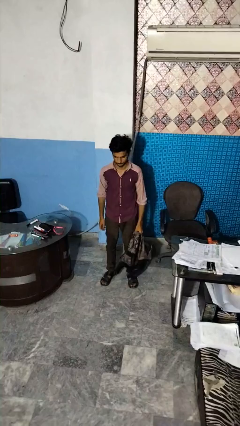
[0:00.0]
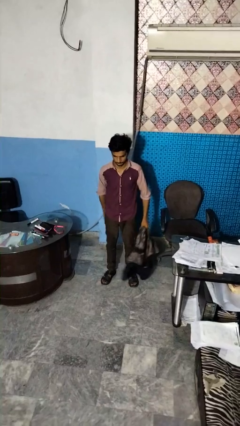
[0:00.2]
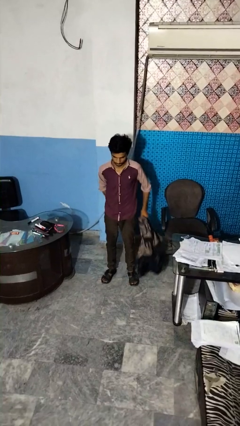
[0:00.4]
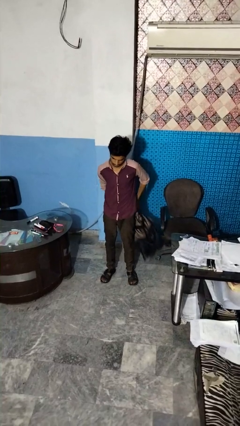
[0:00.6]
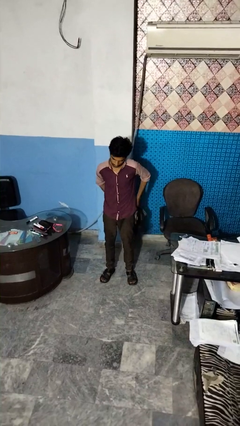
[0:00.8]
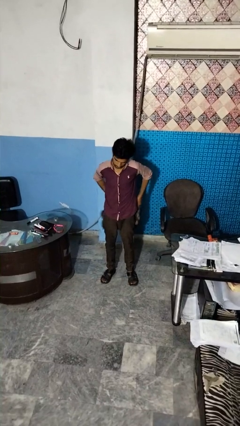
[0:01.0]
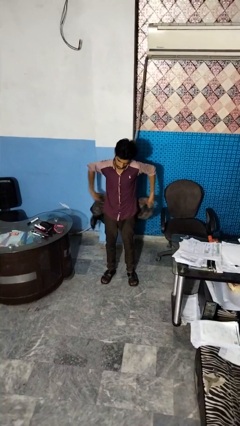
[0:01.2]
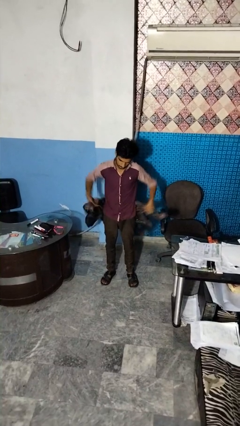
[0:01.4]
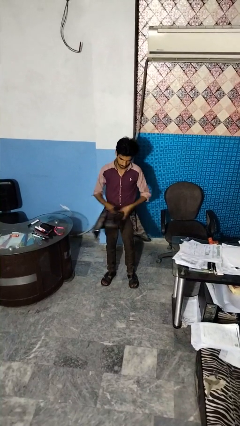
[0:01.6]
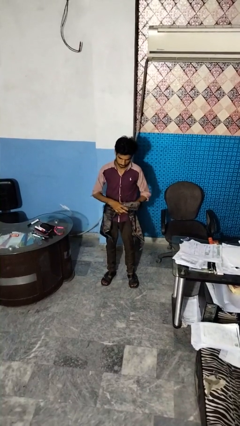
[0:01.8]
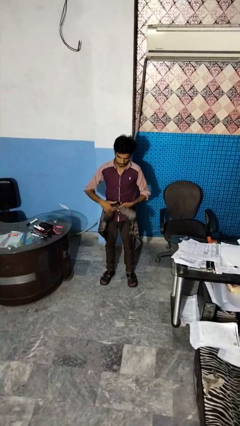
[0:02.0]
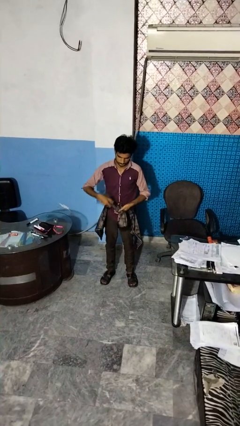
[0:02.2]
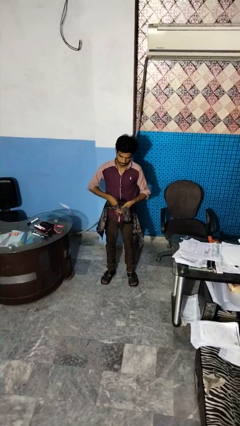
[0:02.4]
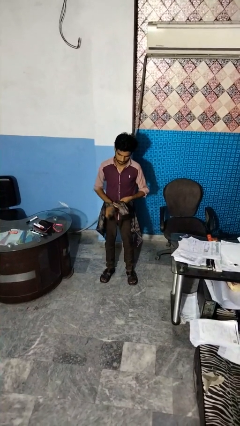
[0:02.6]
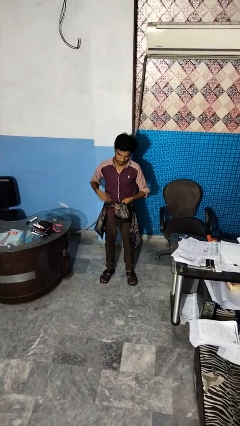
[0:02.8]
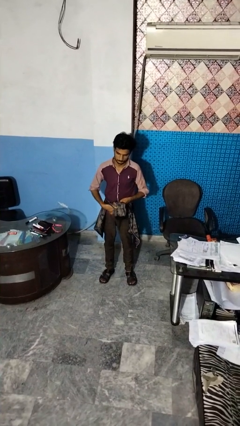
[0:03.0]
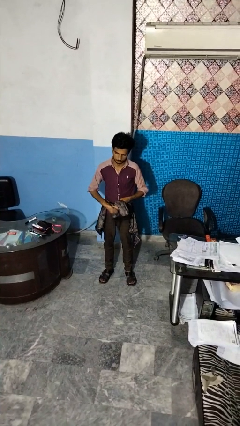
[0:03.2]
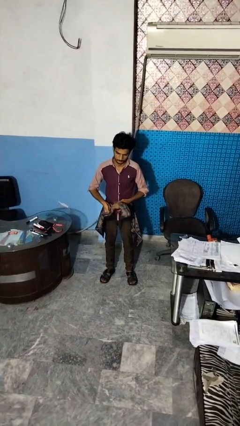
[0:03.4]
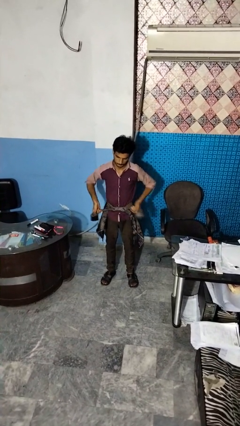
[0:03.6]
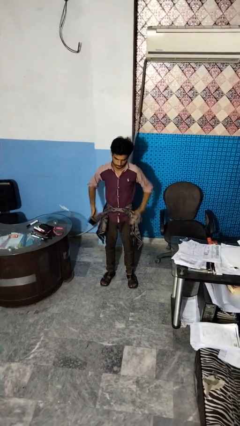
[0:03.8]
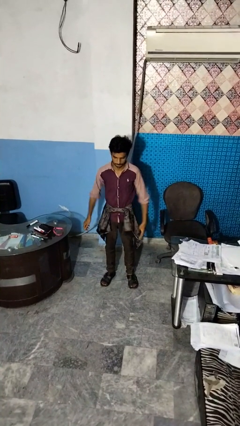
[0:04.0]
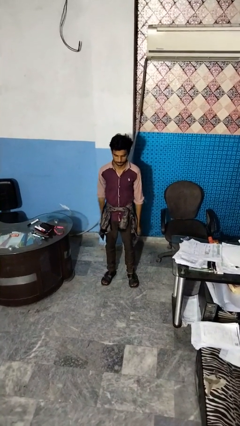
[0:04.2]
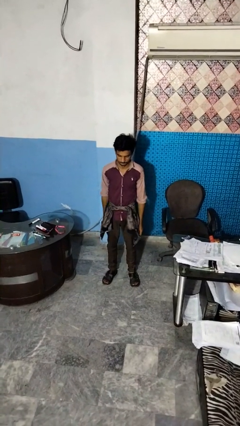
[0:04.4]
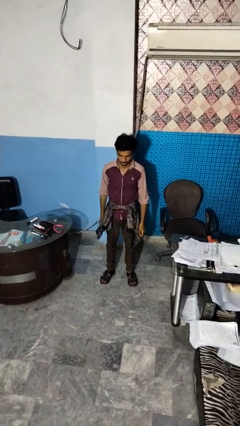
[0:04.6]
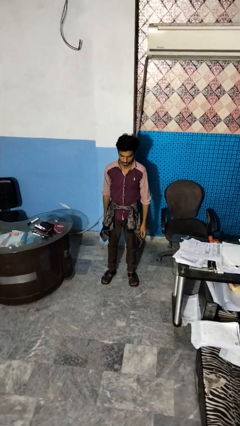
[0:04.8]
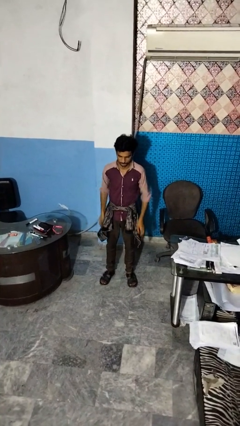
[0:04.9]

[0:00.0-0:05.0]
person ties jacket around waist

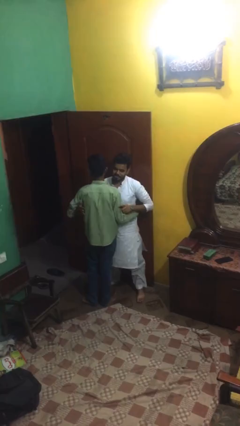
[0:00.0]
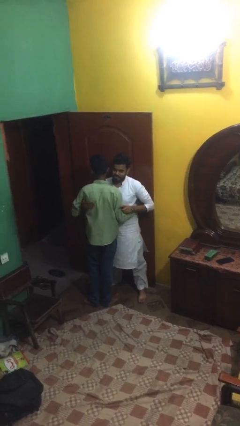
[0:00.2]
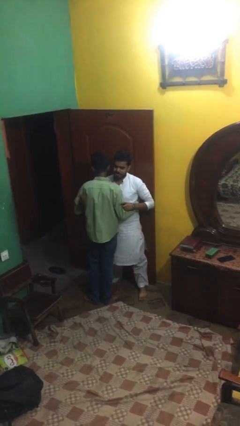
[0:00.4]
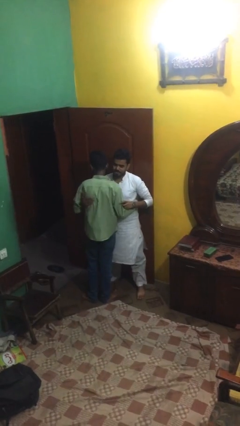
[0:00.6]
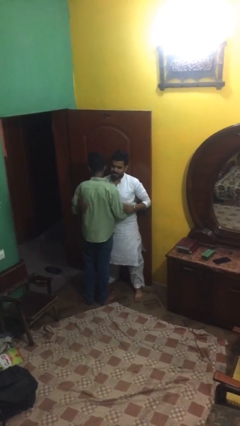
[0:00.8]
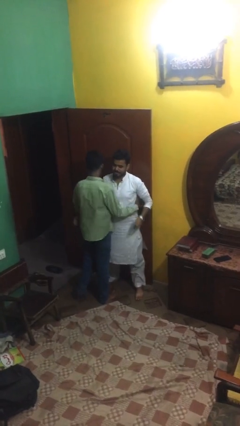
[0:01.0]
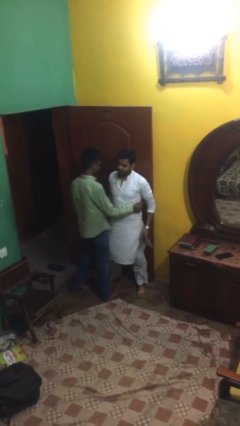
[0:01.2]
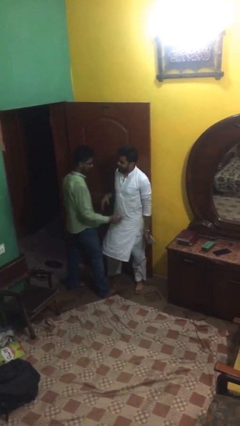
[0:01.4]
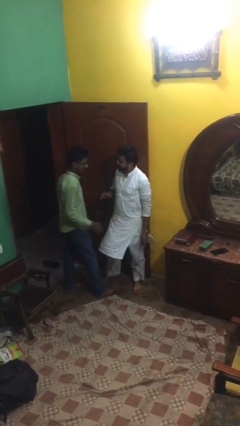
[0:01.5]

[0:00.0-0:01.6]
person embraces person

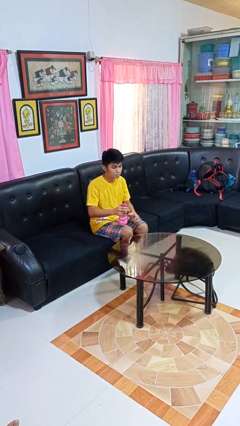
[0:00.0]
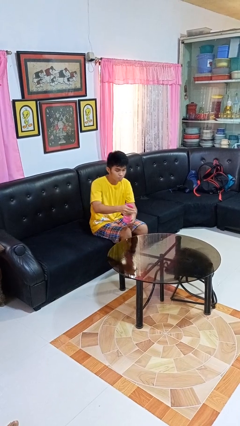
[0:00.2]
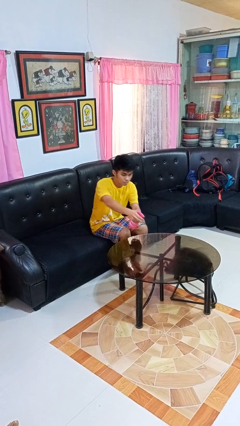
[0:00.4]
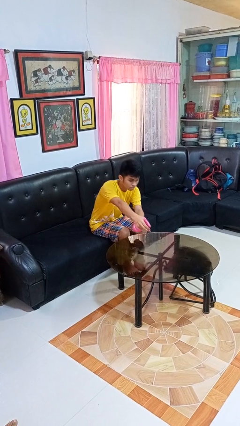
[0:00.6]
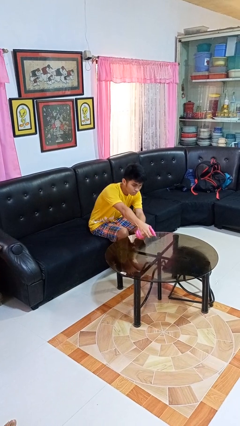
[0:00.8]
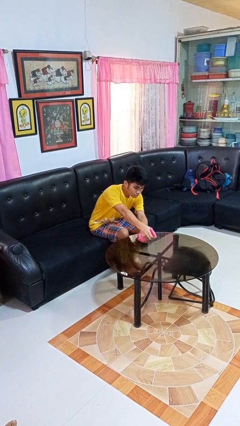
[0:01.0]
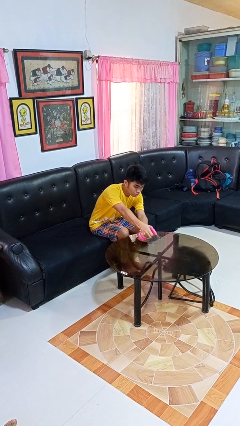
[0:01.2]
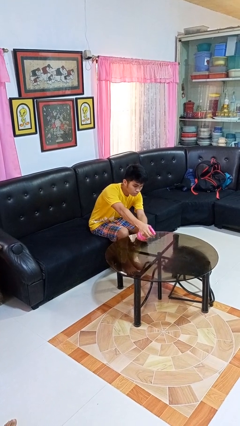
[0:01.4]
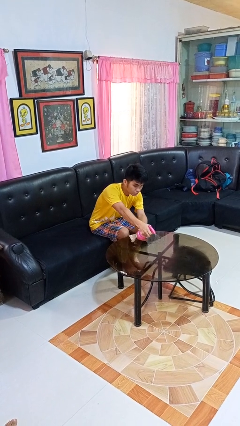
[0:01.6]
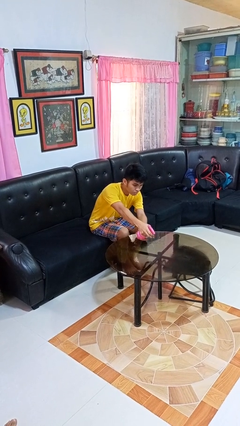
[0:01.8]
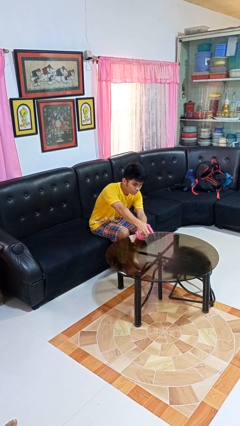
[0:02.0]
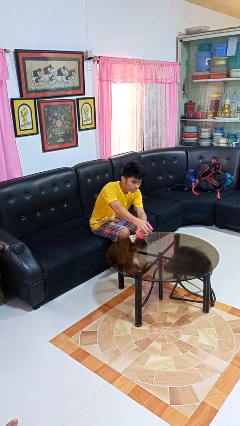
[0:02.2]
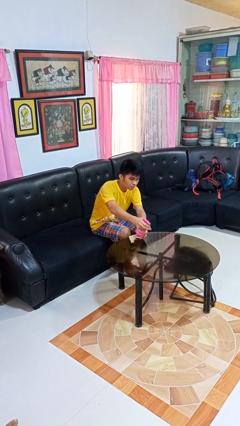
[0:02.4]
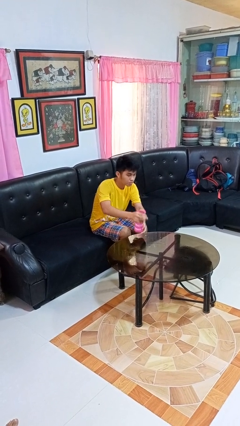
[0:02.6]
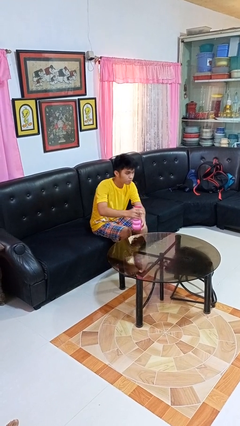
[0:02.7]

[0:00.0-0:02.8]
person sprays from bottle

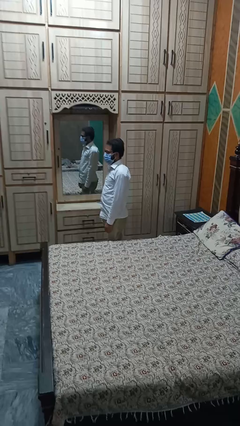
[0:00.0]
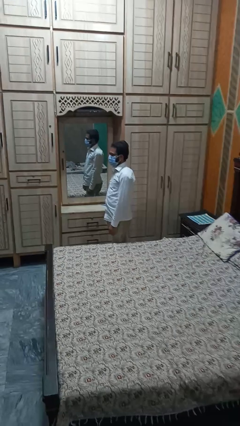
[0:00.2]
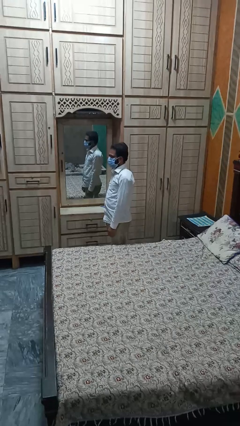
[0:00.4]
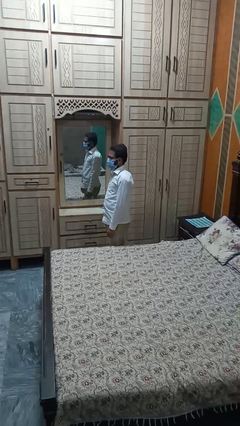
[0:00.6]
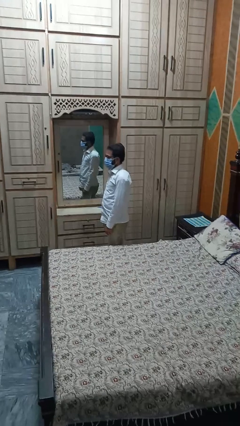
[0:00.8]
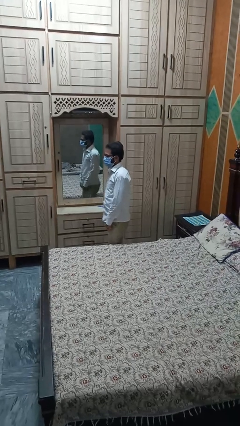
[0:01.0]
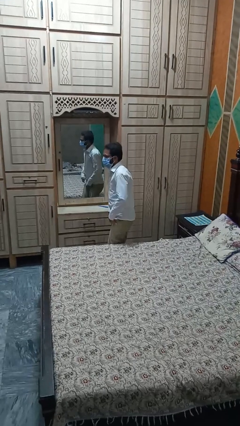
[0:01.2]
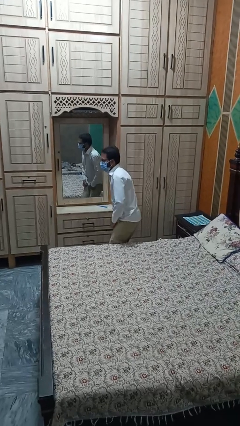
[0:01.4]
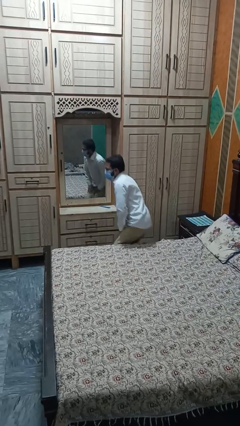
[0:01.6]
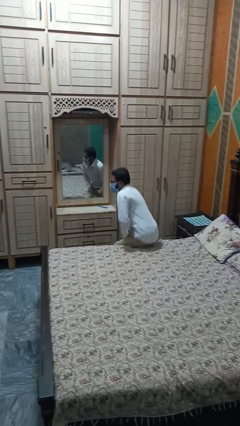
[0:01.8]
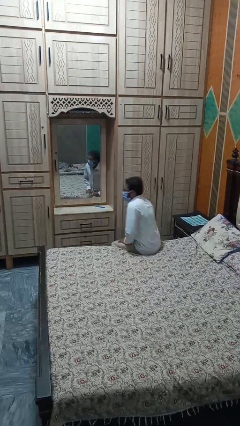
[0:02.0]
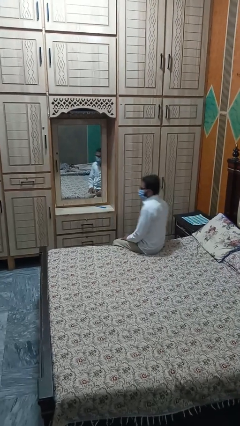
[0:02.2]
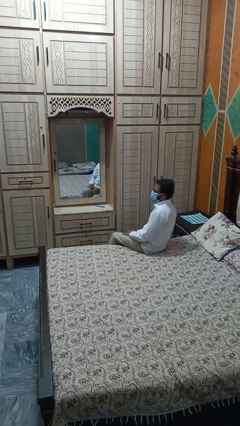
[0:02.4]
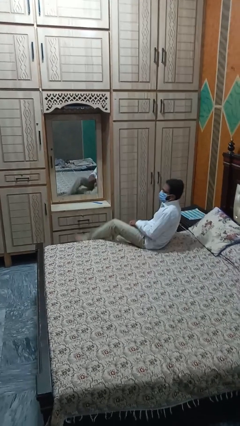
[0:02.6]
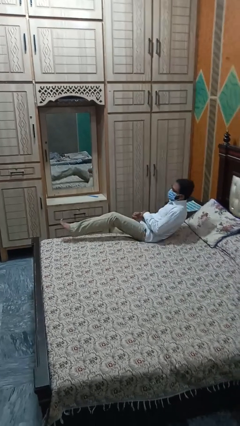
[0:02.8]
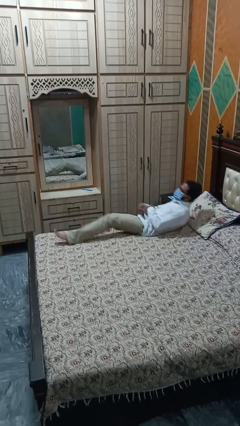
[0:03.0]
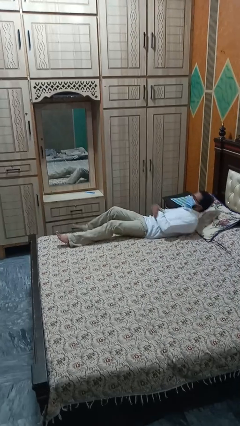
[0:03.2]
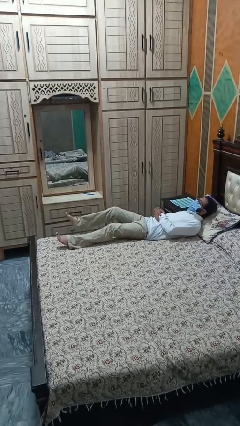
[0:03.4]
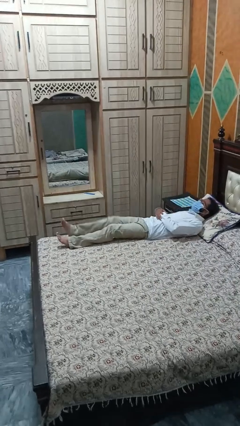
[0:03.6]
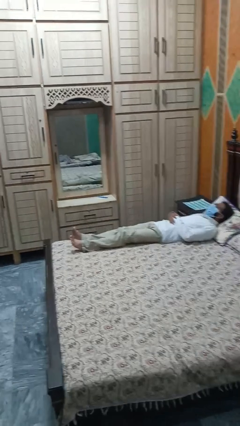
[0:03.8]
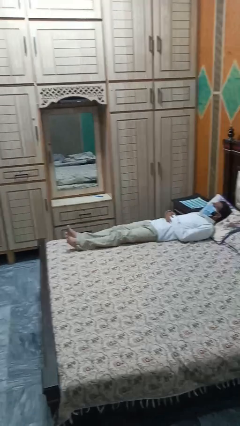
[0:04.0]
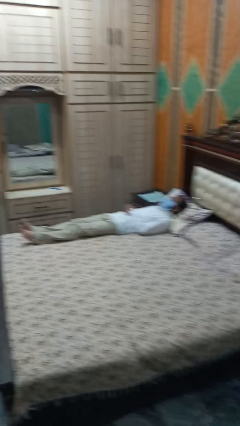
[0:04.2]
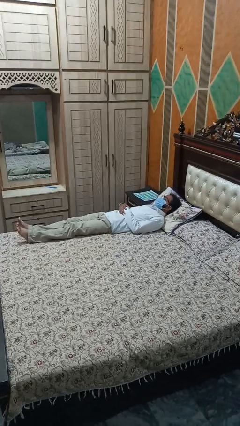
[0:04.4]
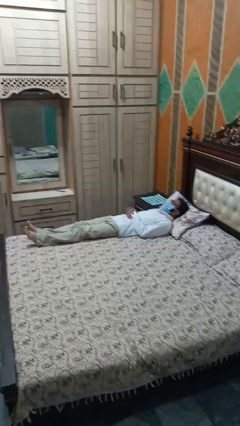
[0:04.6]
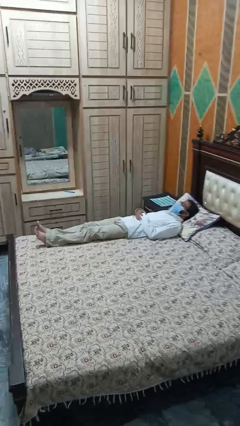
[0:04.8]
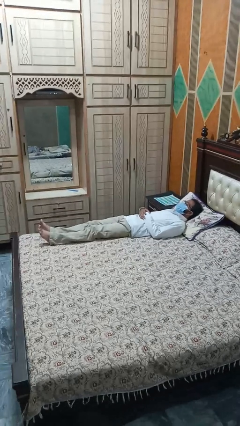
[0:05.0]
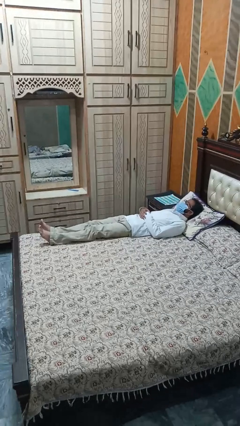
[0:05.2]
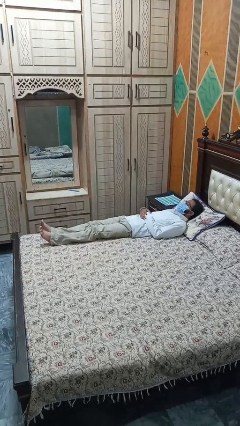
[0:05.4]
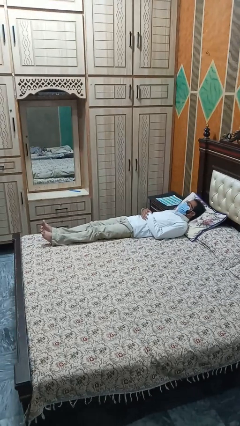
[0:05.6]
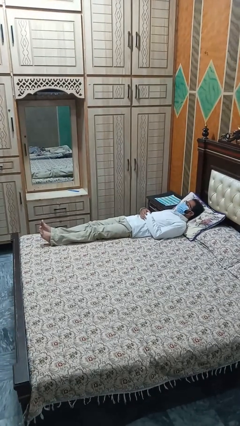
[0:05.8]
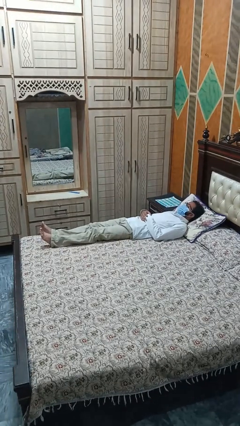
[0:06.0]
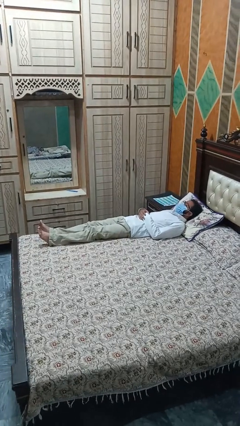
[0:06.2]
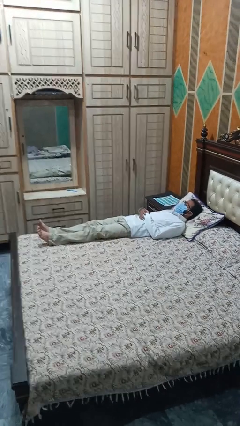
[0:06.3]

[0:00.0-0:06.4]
person lies down on bed

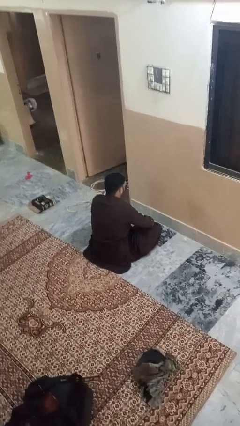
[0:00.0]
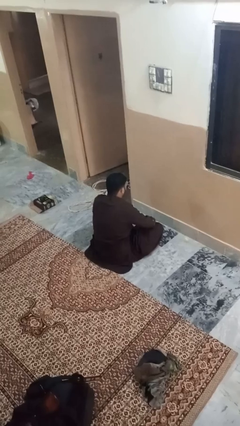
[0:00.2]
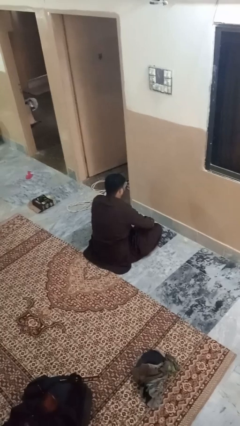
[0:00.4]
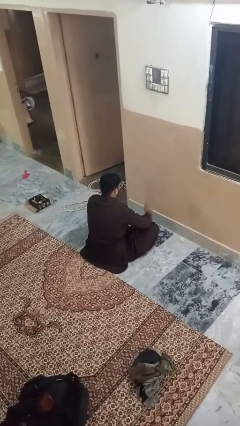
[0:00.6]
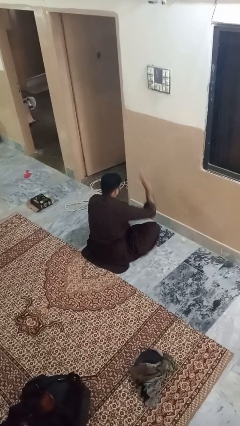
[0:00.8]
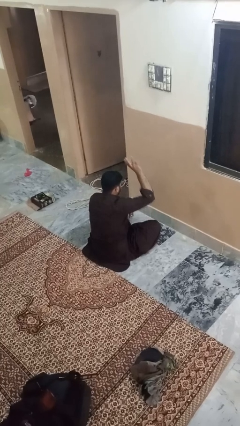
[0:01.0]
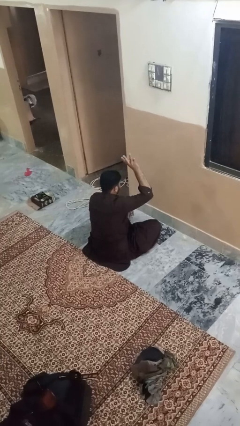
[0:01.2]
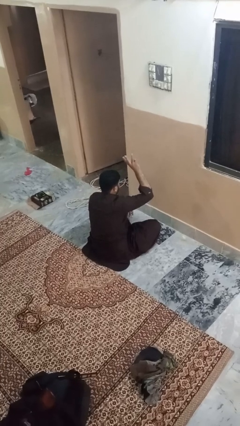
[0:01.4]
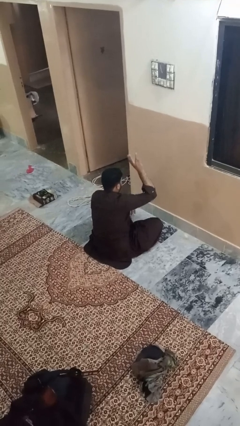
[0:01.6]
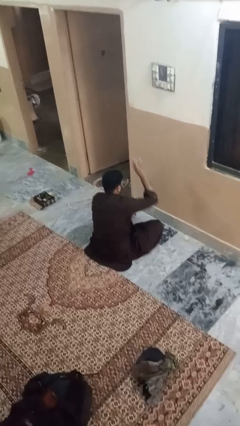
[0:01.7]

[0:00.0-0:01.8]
person gestures number three
